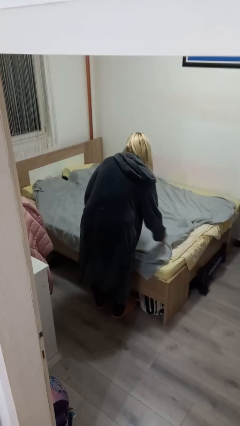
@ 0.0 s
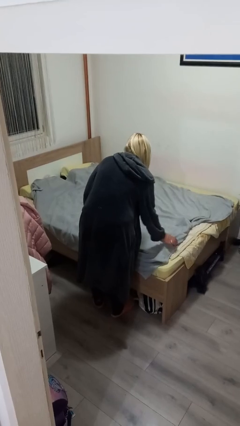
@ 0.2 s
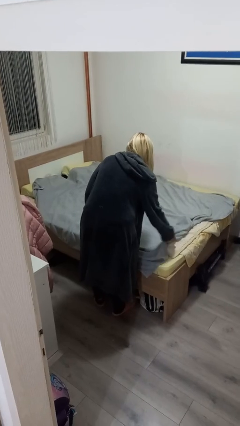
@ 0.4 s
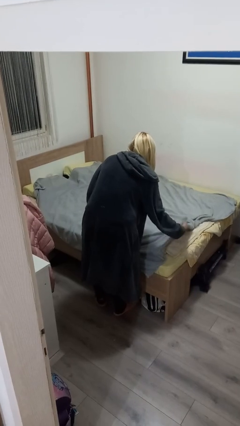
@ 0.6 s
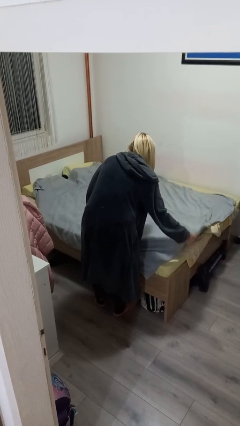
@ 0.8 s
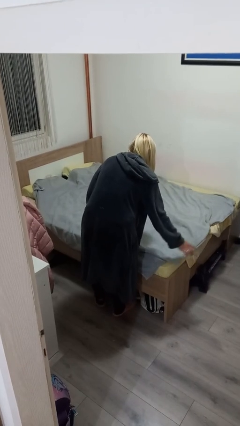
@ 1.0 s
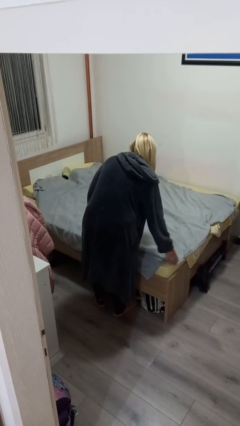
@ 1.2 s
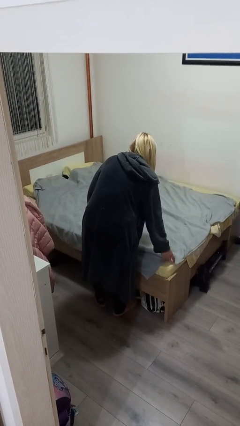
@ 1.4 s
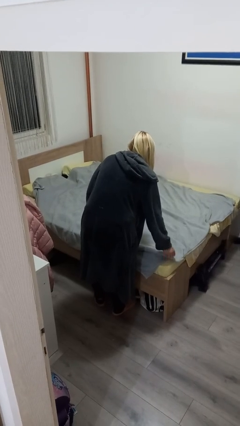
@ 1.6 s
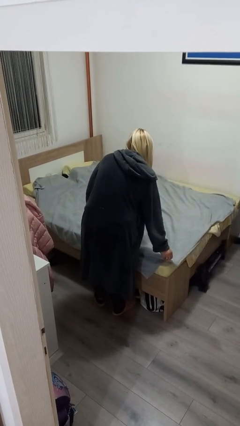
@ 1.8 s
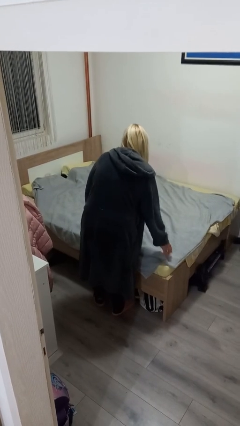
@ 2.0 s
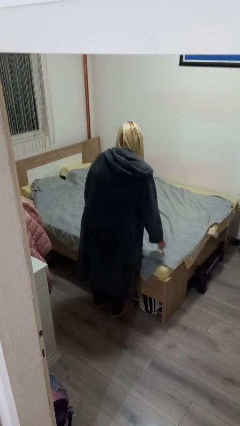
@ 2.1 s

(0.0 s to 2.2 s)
person makes bed

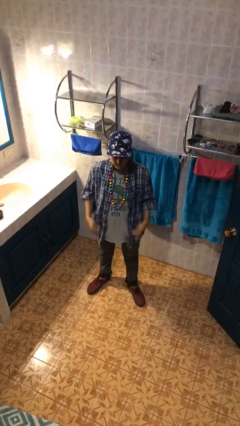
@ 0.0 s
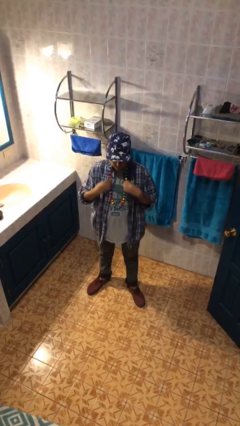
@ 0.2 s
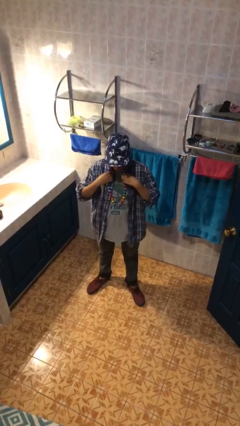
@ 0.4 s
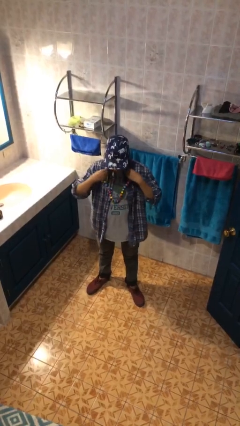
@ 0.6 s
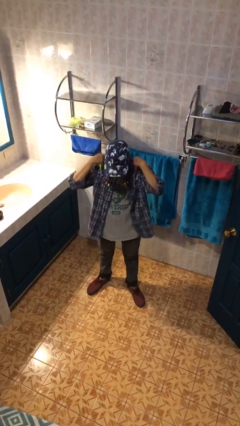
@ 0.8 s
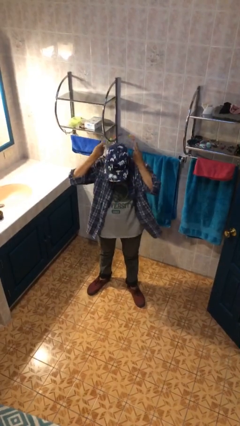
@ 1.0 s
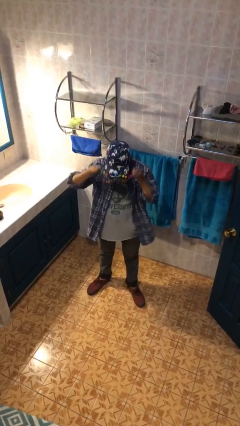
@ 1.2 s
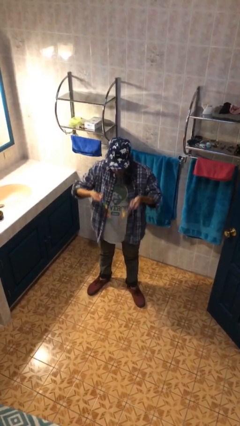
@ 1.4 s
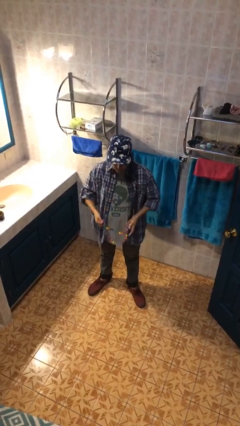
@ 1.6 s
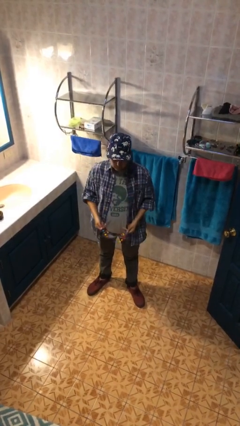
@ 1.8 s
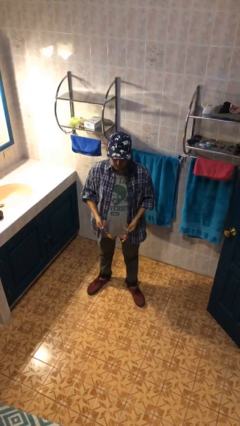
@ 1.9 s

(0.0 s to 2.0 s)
person takes off necklace

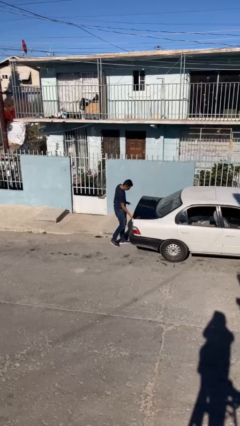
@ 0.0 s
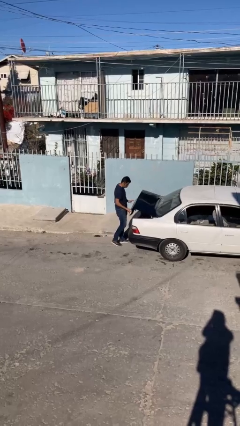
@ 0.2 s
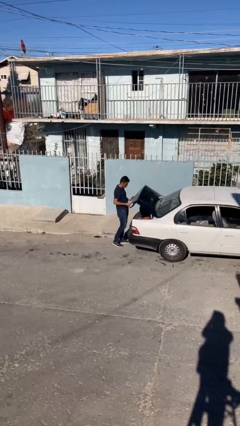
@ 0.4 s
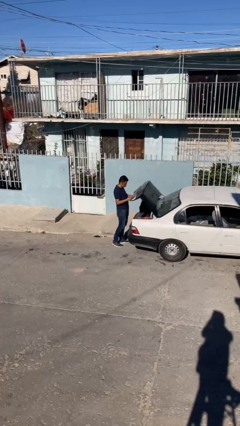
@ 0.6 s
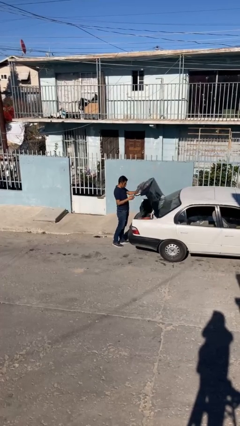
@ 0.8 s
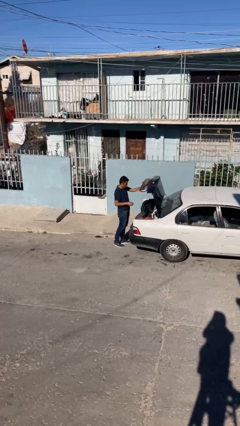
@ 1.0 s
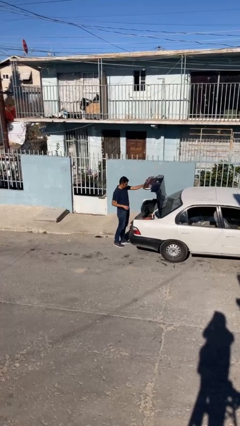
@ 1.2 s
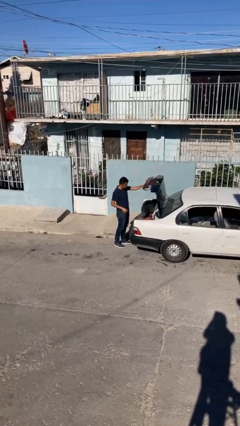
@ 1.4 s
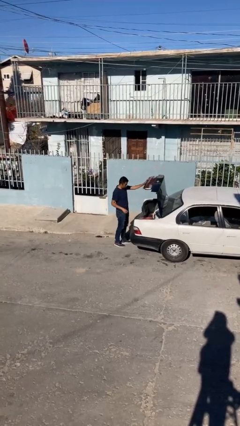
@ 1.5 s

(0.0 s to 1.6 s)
person enters car

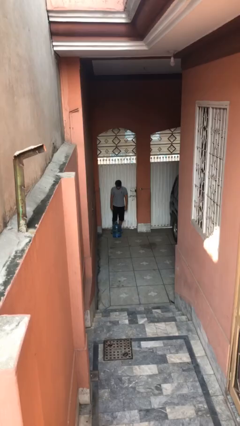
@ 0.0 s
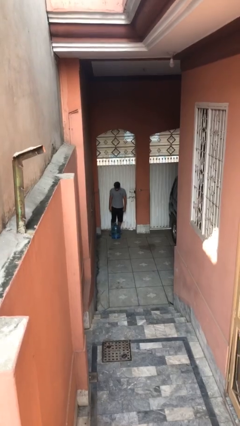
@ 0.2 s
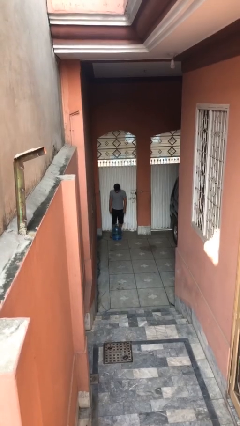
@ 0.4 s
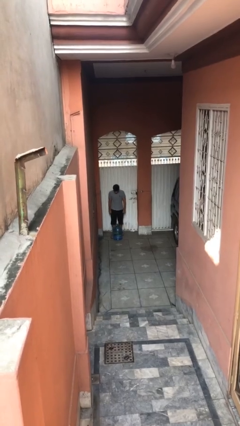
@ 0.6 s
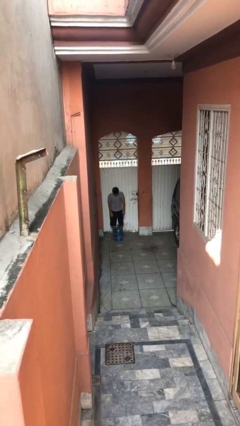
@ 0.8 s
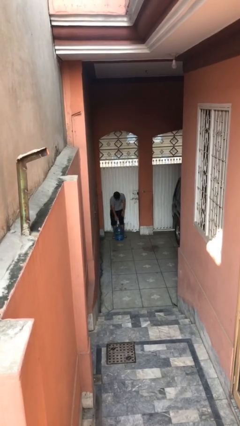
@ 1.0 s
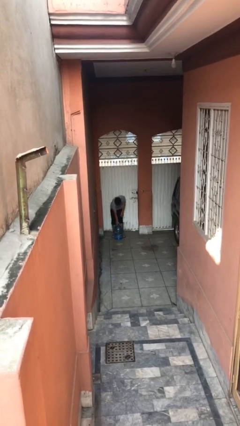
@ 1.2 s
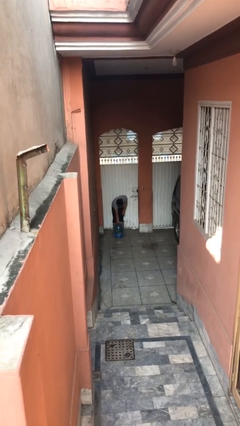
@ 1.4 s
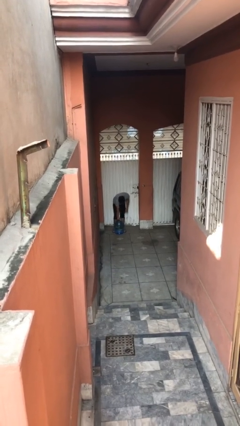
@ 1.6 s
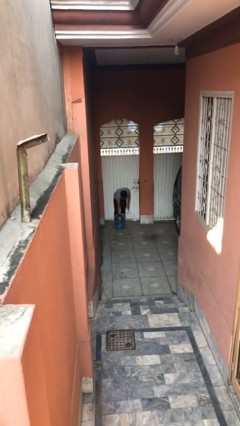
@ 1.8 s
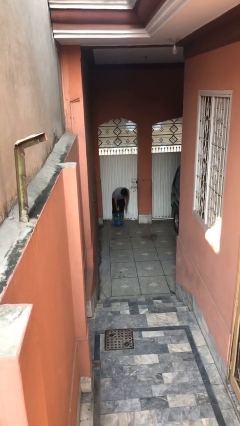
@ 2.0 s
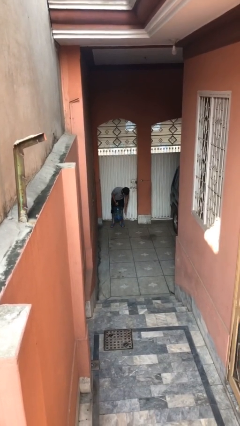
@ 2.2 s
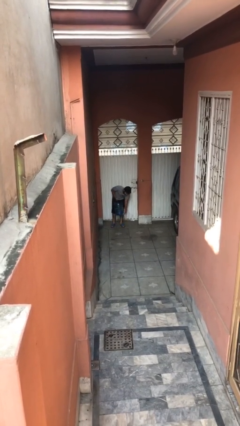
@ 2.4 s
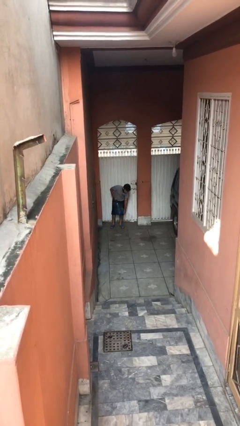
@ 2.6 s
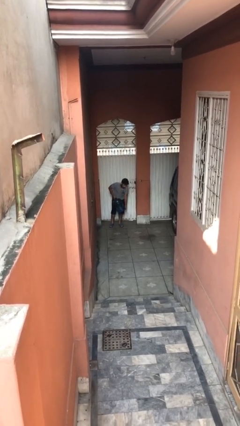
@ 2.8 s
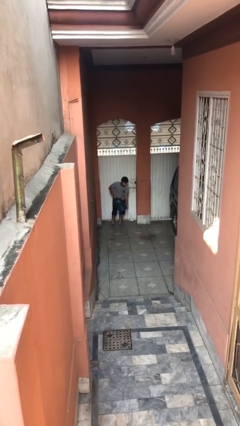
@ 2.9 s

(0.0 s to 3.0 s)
person picks up object from floor

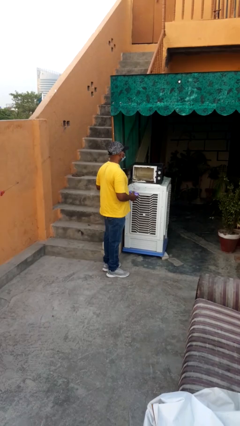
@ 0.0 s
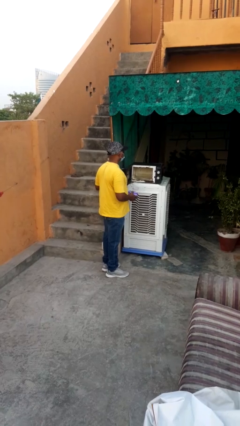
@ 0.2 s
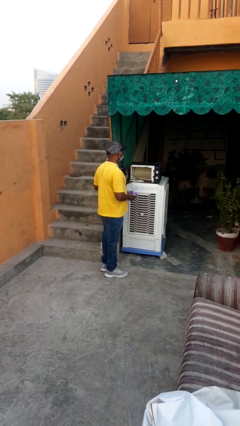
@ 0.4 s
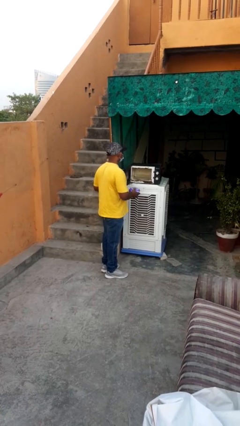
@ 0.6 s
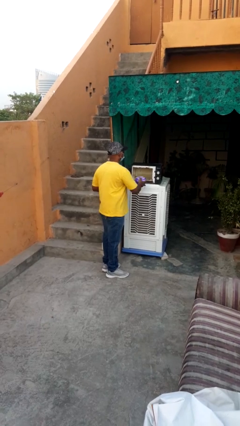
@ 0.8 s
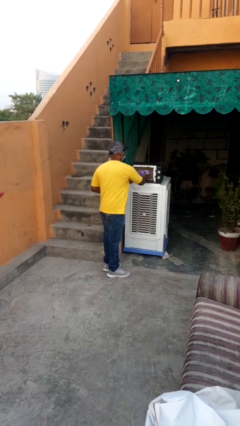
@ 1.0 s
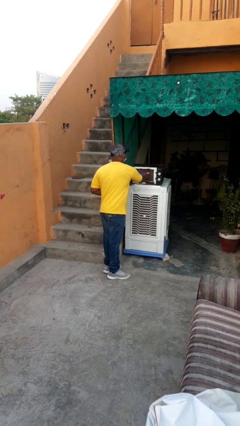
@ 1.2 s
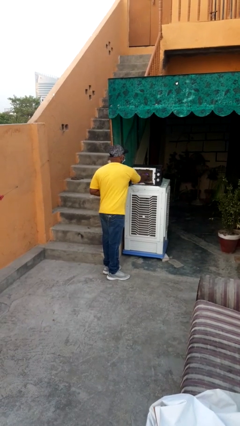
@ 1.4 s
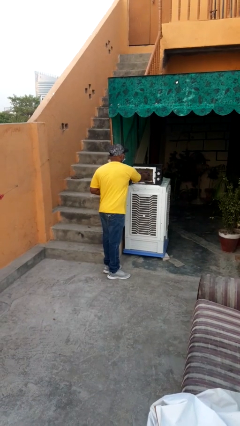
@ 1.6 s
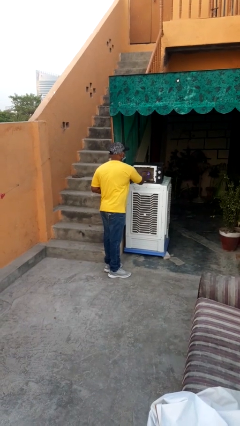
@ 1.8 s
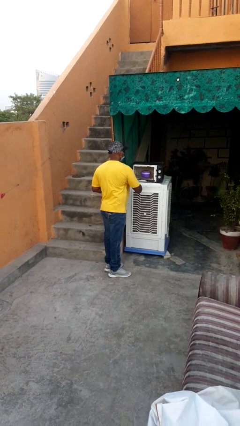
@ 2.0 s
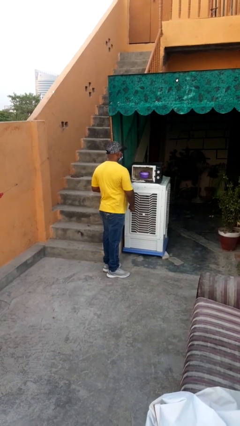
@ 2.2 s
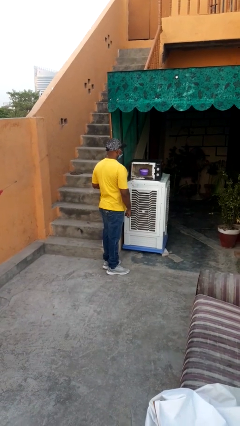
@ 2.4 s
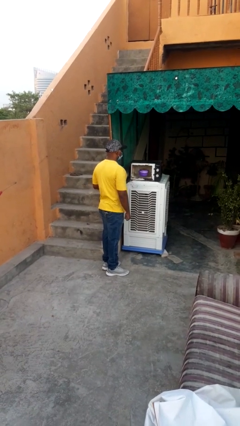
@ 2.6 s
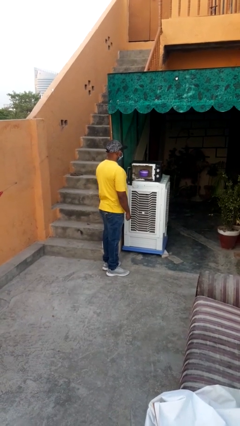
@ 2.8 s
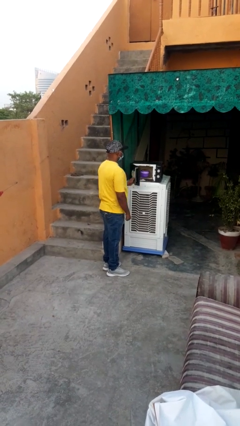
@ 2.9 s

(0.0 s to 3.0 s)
person puts object into microwave

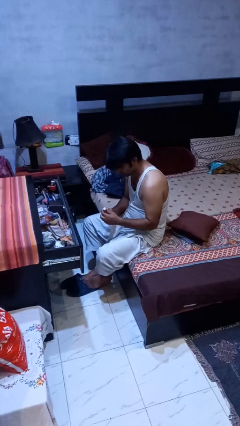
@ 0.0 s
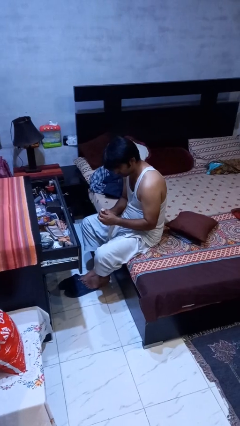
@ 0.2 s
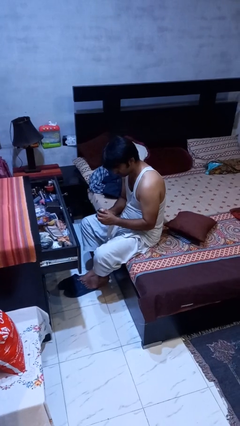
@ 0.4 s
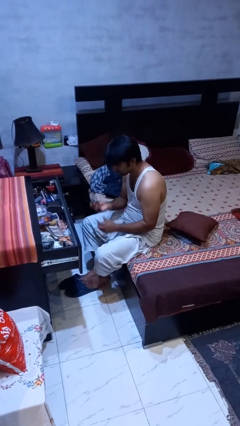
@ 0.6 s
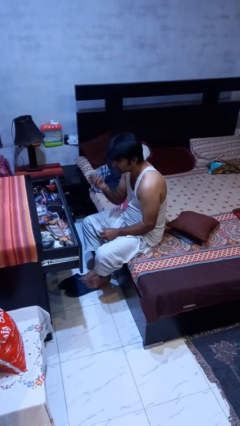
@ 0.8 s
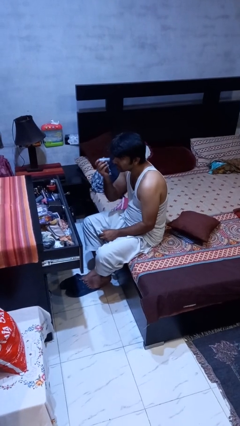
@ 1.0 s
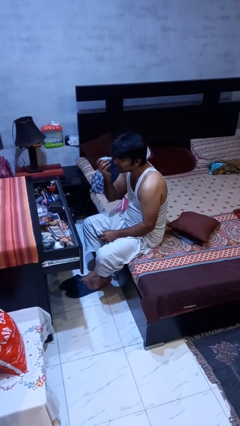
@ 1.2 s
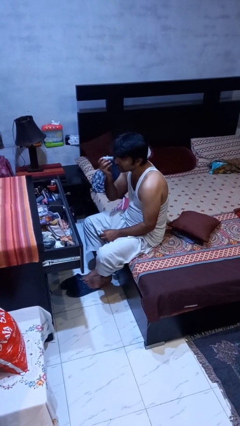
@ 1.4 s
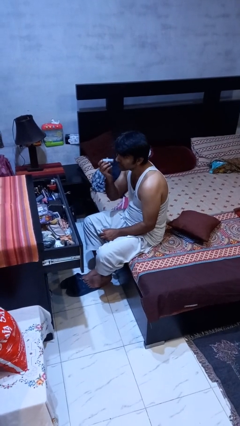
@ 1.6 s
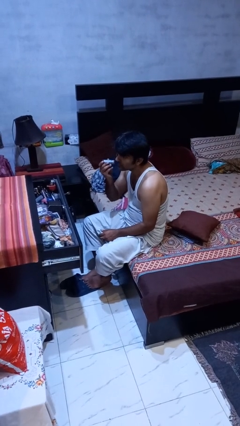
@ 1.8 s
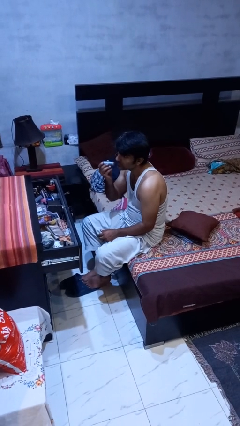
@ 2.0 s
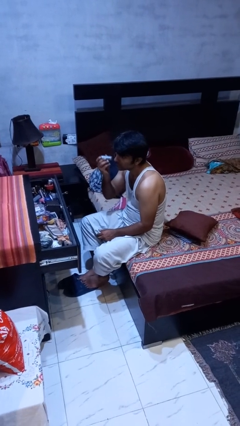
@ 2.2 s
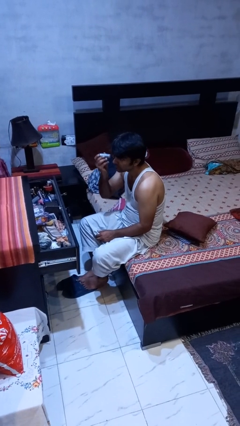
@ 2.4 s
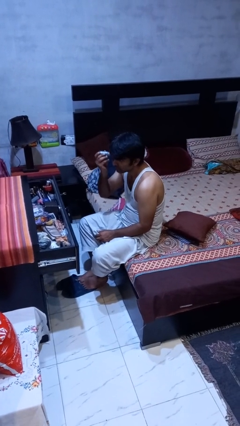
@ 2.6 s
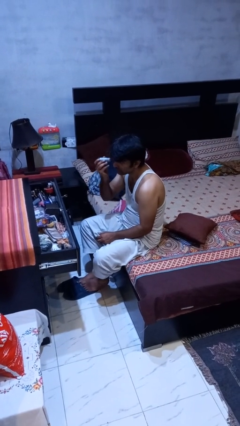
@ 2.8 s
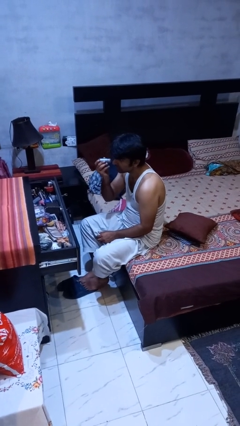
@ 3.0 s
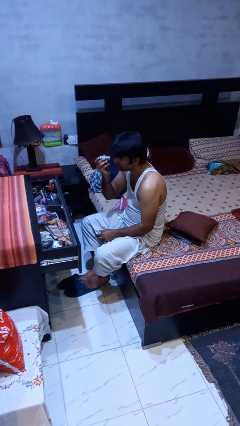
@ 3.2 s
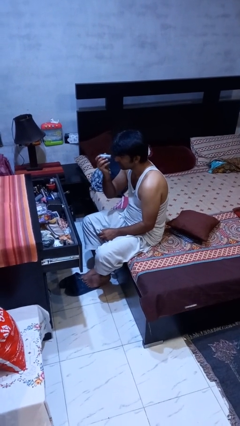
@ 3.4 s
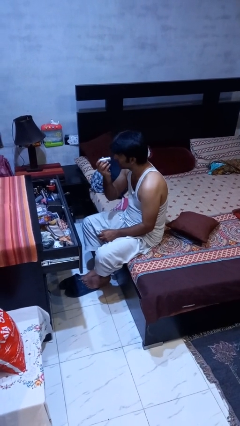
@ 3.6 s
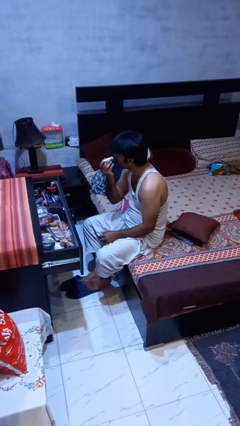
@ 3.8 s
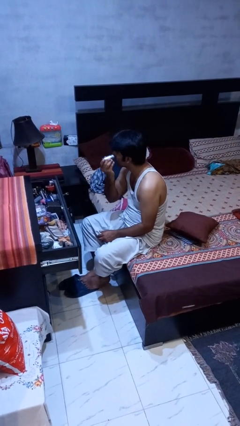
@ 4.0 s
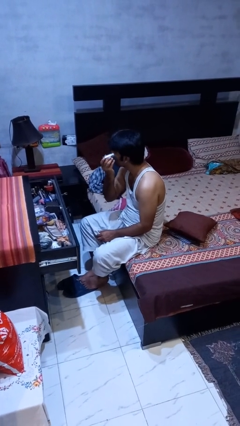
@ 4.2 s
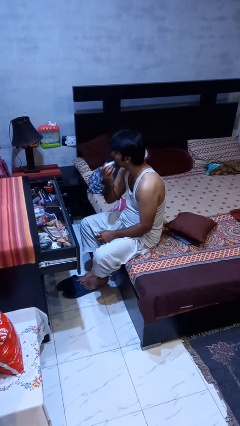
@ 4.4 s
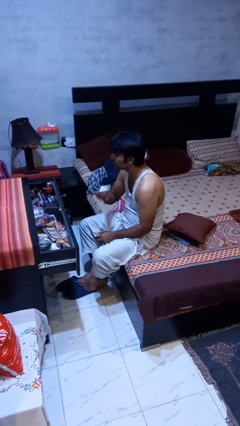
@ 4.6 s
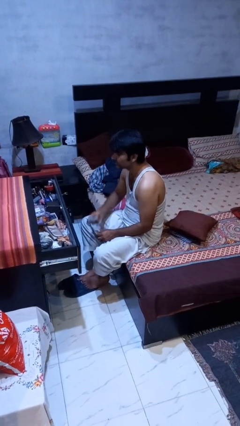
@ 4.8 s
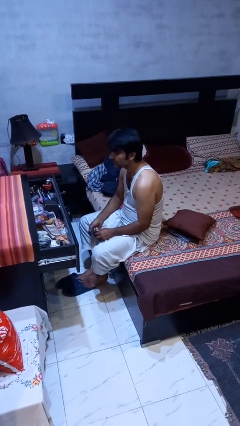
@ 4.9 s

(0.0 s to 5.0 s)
person applies foundation makeup

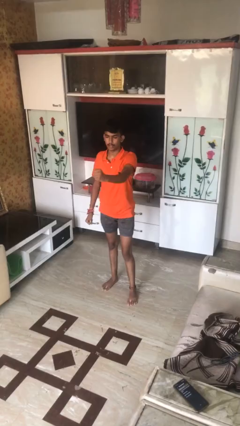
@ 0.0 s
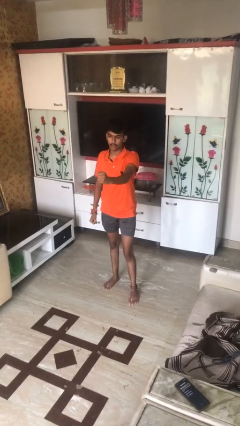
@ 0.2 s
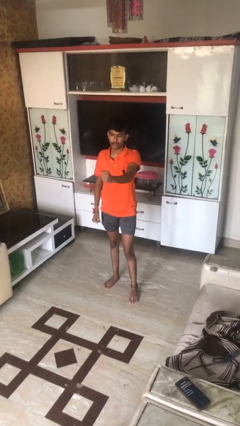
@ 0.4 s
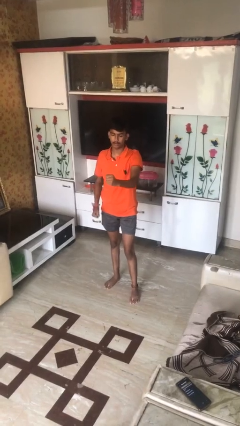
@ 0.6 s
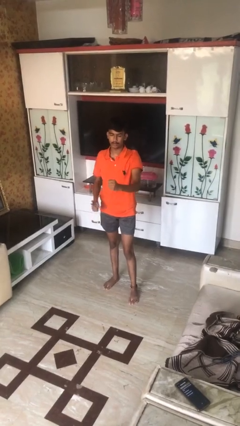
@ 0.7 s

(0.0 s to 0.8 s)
person punches
